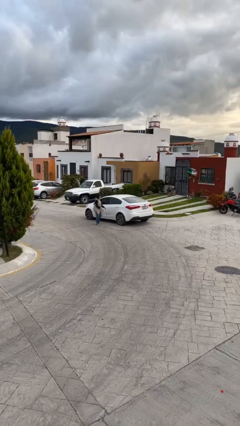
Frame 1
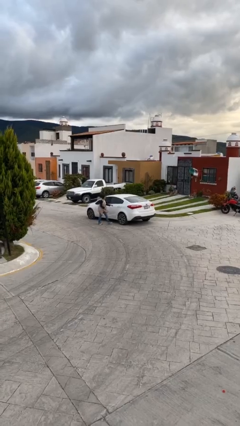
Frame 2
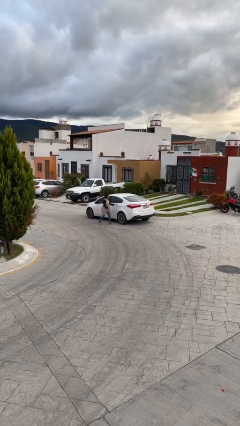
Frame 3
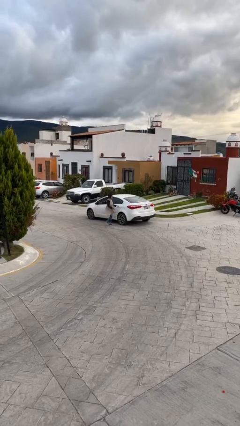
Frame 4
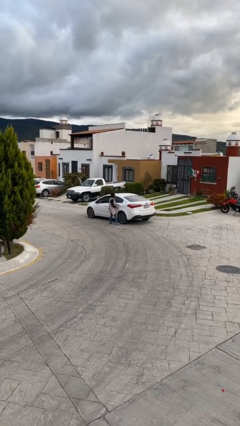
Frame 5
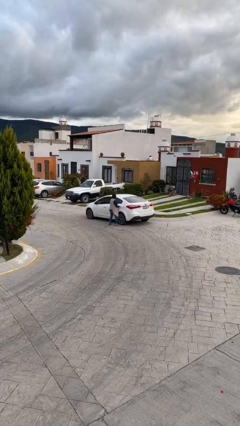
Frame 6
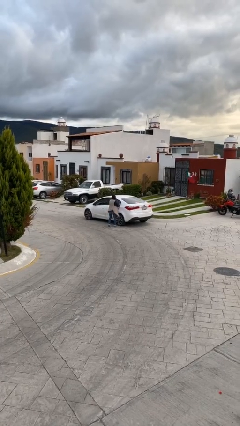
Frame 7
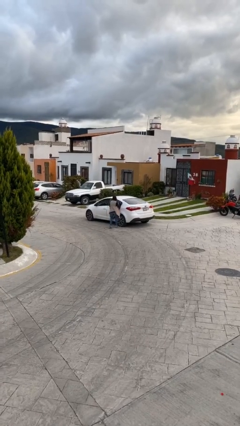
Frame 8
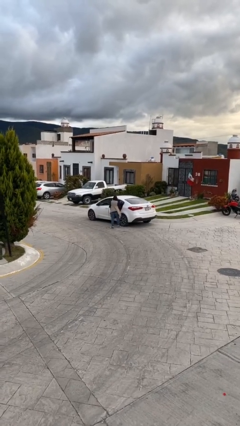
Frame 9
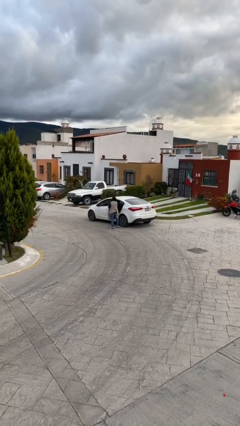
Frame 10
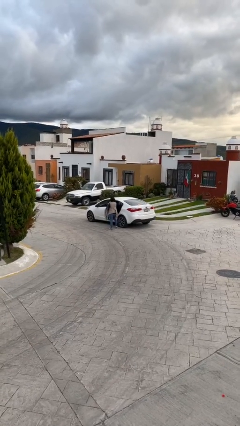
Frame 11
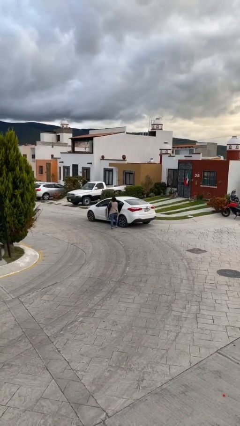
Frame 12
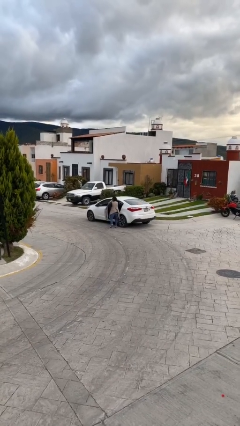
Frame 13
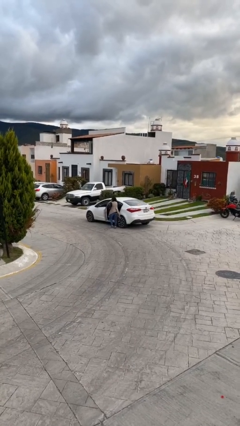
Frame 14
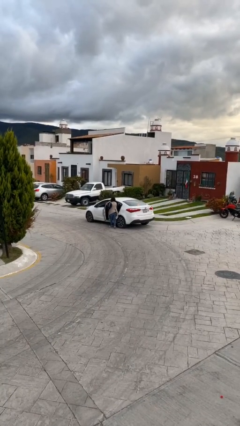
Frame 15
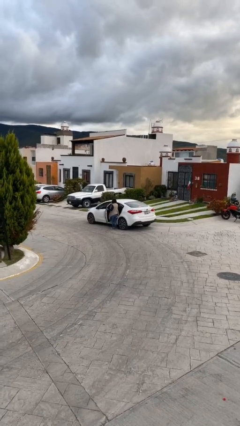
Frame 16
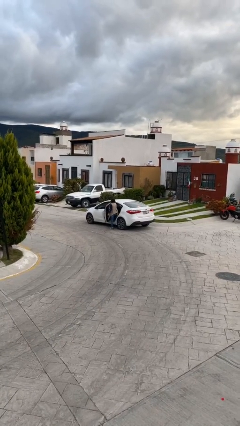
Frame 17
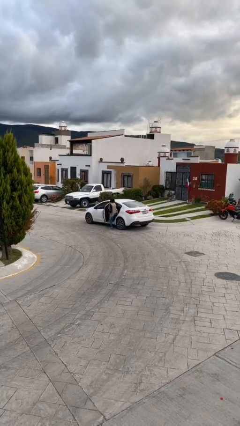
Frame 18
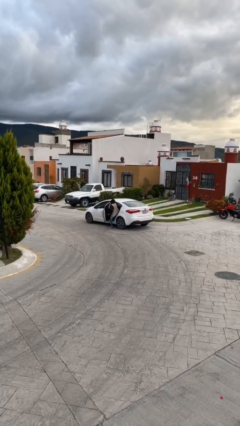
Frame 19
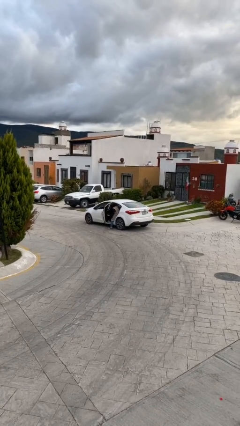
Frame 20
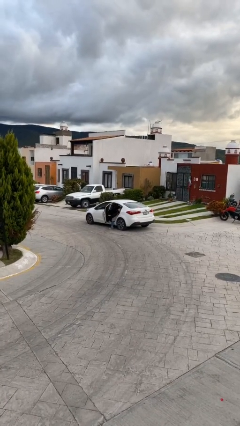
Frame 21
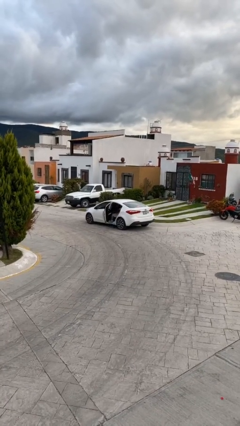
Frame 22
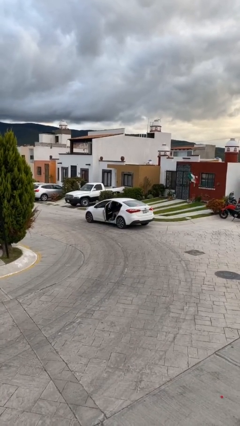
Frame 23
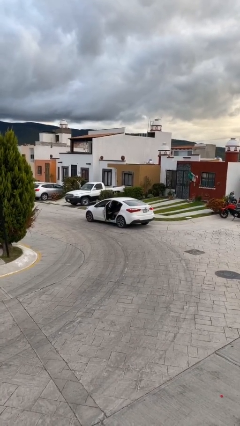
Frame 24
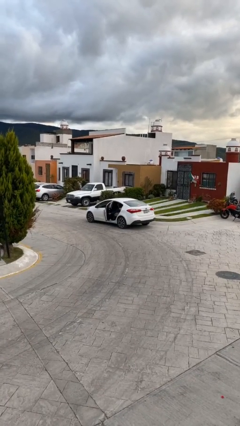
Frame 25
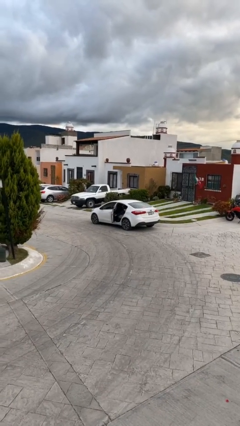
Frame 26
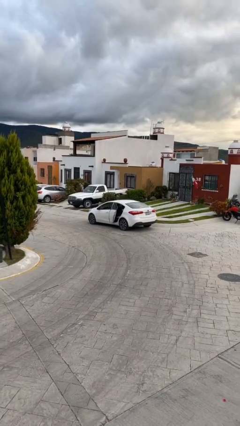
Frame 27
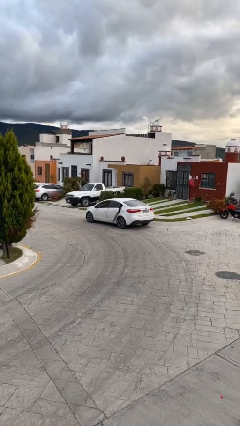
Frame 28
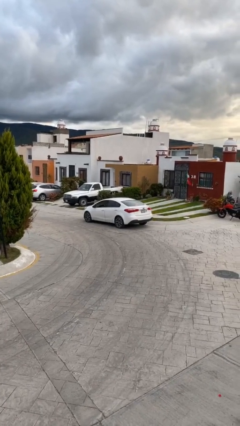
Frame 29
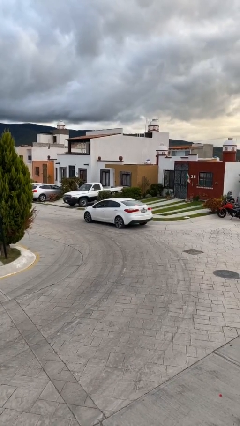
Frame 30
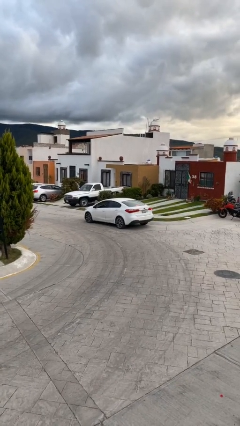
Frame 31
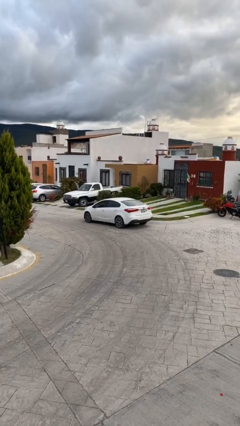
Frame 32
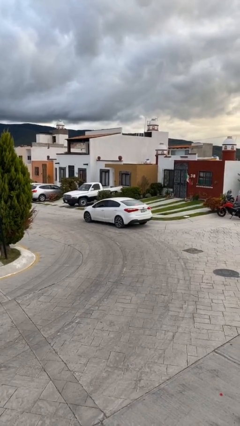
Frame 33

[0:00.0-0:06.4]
car picks up person

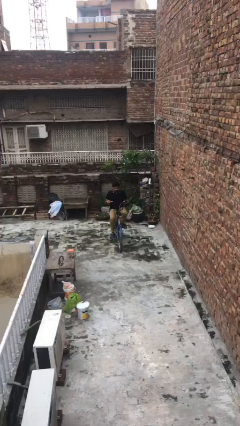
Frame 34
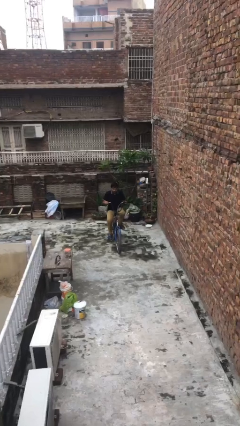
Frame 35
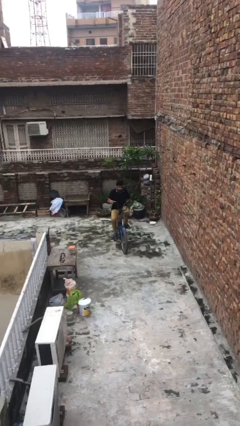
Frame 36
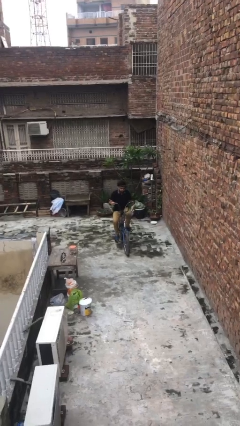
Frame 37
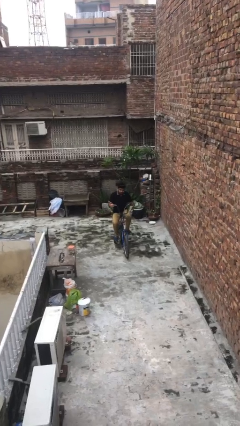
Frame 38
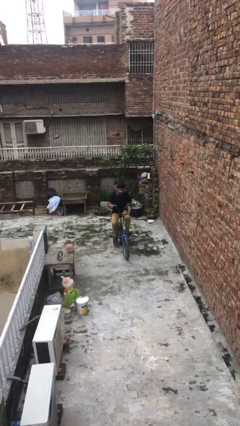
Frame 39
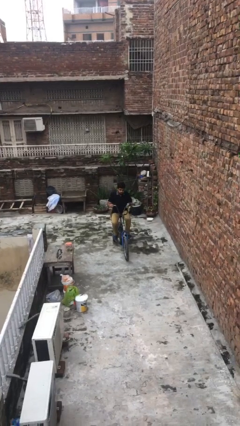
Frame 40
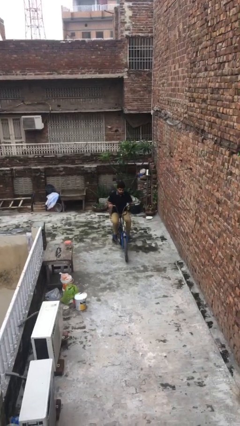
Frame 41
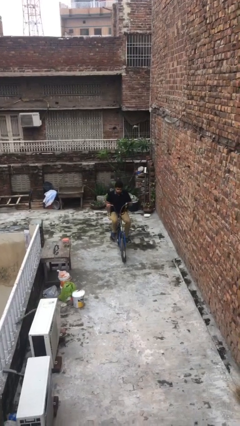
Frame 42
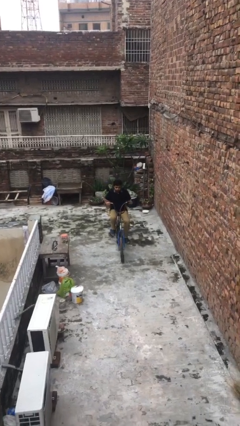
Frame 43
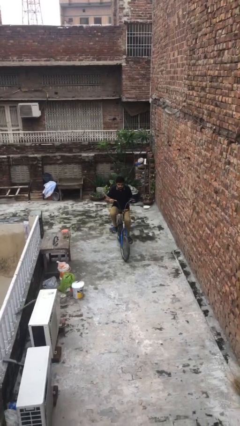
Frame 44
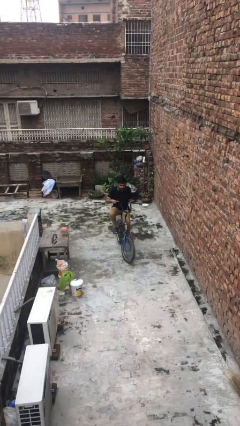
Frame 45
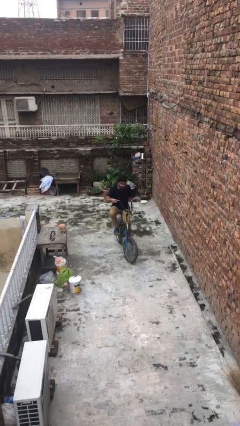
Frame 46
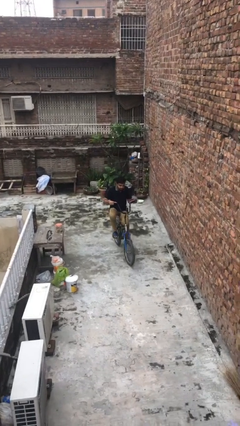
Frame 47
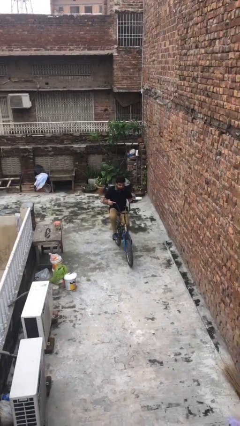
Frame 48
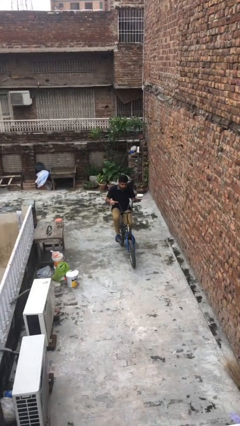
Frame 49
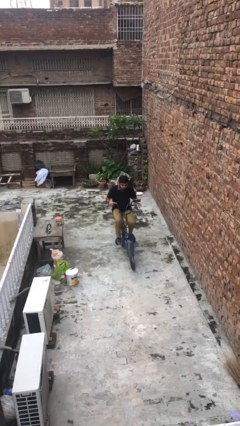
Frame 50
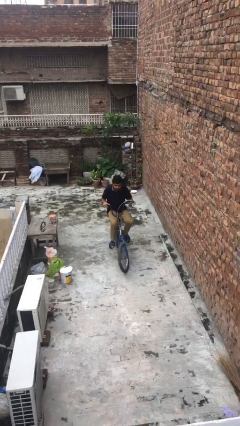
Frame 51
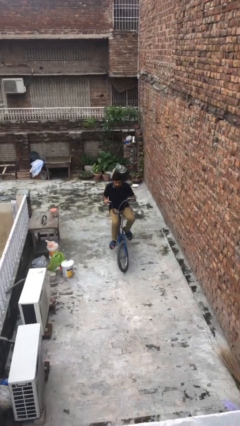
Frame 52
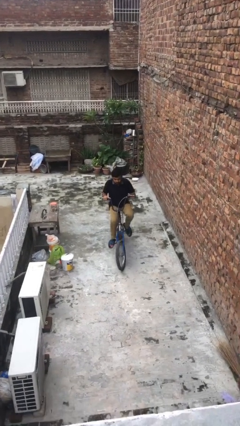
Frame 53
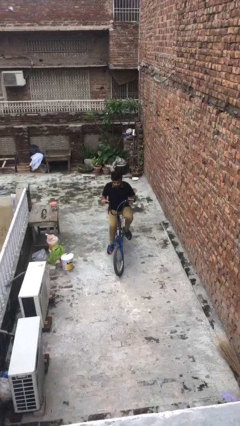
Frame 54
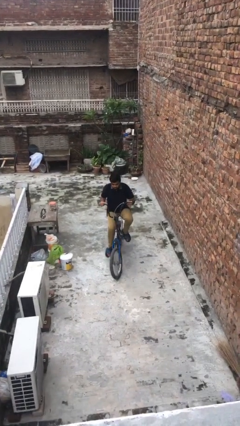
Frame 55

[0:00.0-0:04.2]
person rides bicycle

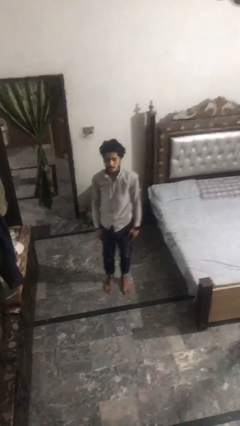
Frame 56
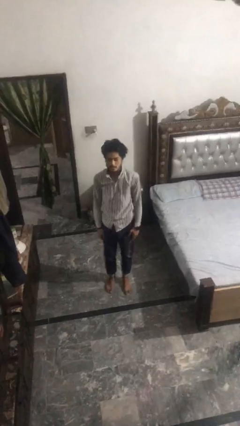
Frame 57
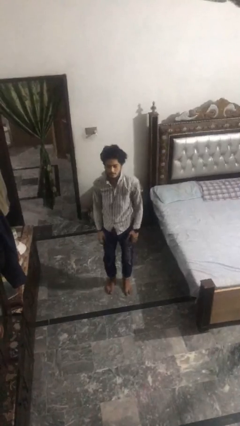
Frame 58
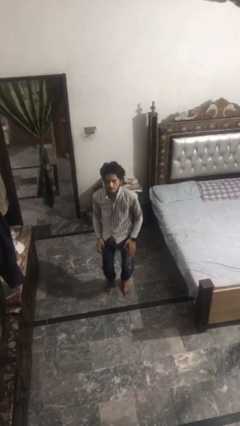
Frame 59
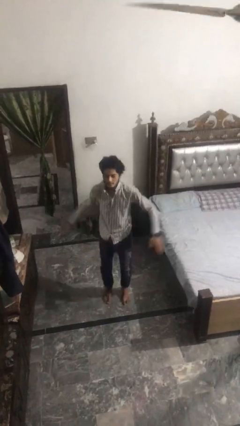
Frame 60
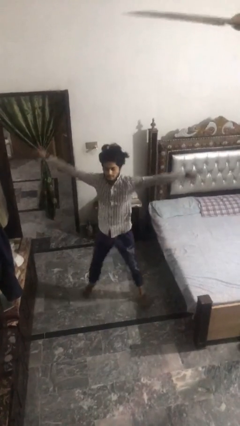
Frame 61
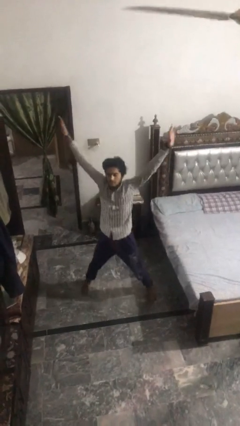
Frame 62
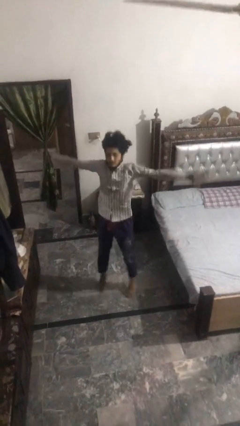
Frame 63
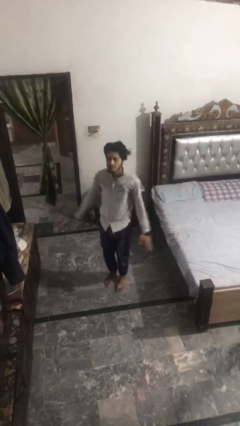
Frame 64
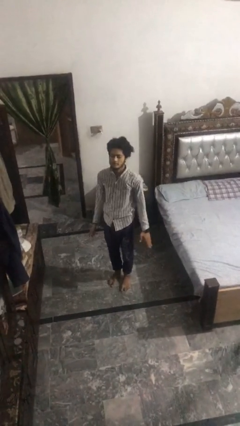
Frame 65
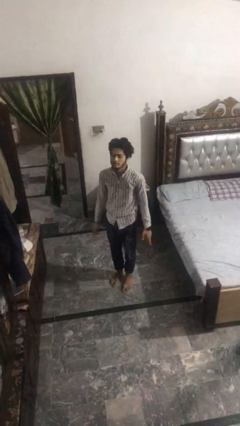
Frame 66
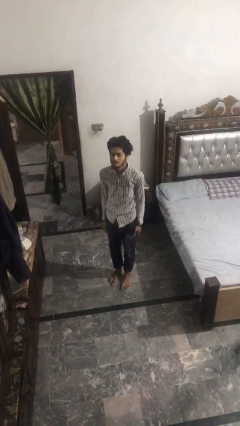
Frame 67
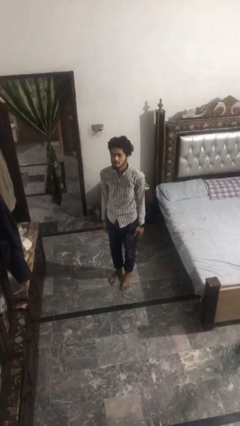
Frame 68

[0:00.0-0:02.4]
person exercises with jumping jacks

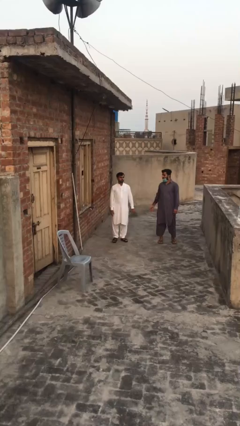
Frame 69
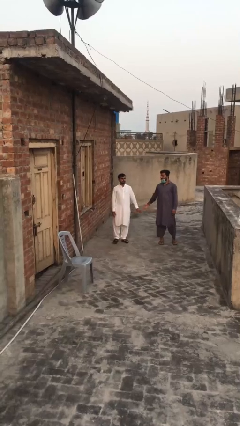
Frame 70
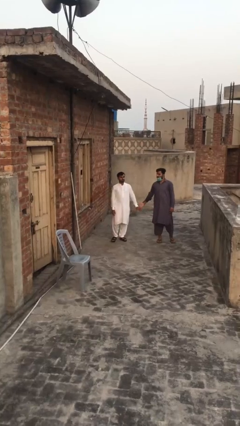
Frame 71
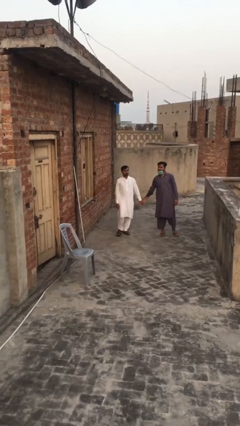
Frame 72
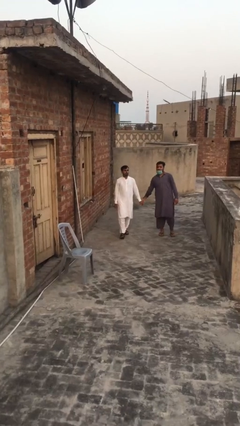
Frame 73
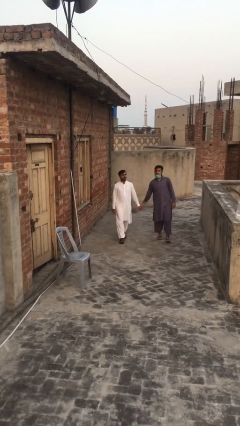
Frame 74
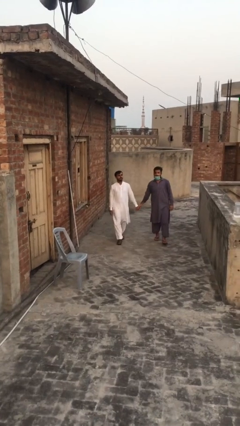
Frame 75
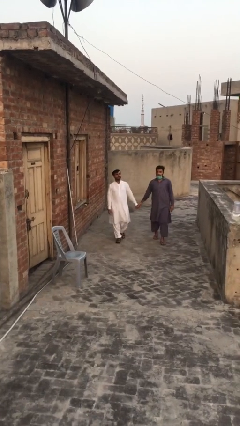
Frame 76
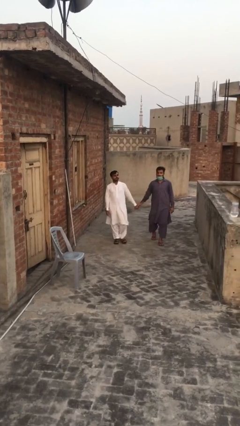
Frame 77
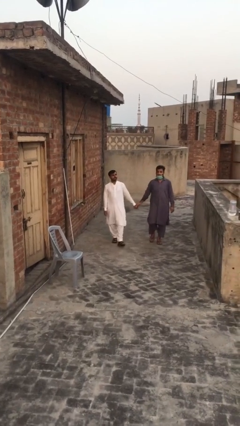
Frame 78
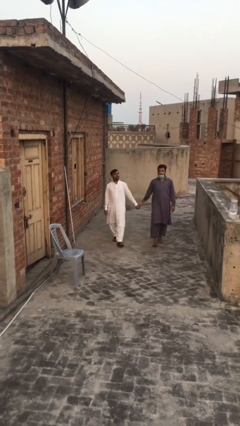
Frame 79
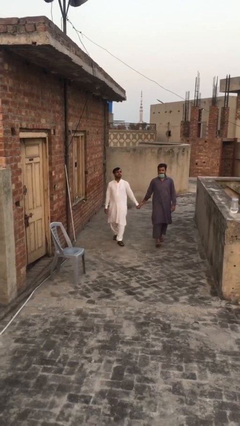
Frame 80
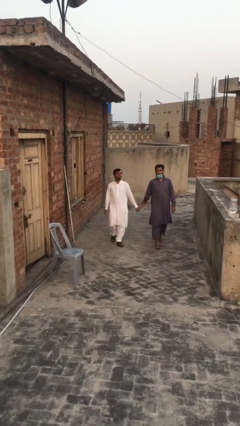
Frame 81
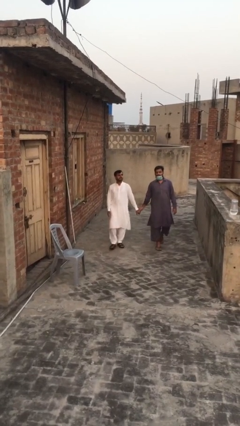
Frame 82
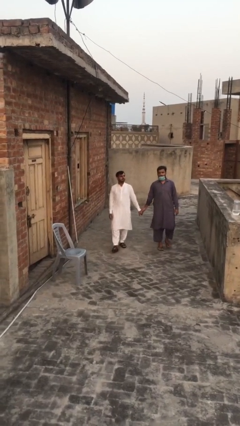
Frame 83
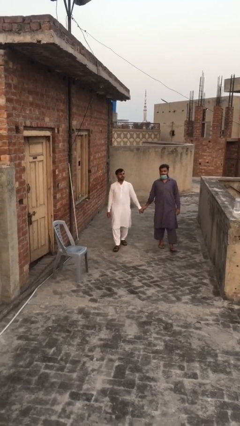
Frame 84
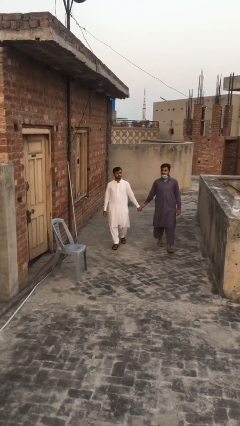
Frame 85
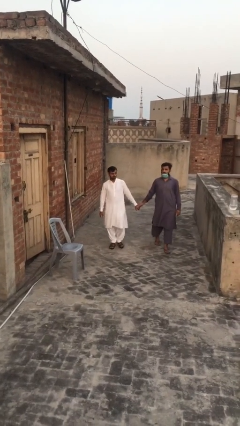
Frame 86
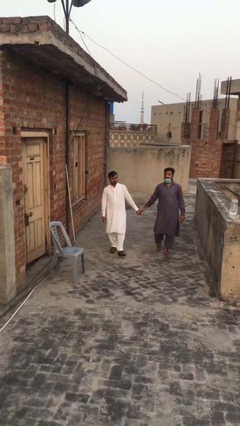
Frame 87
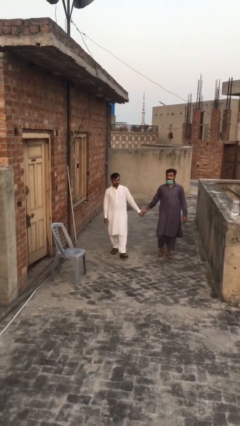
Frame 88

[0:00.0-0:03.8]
person holds hand

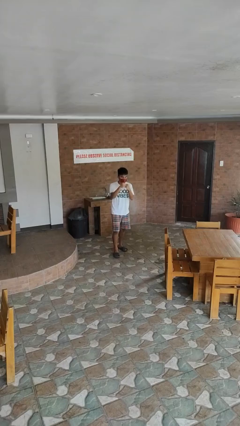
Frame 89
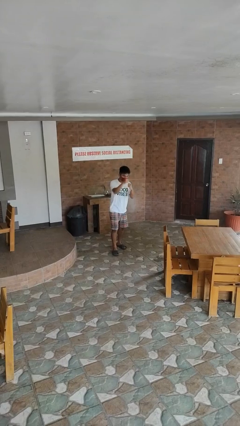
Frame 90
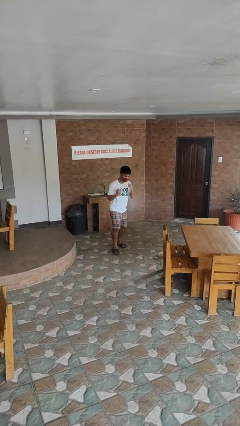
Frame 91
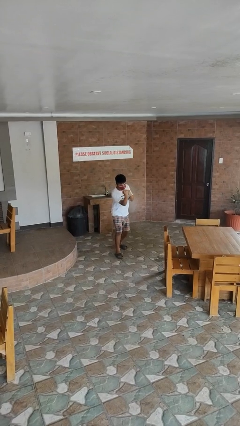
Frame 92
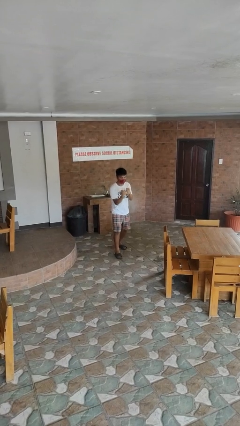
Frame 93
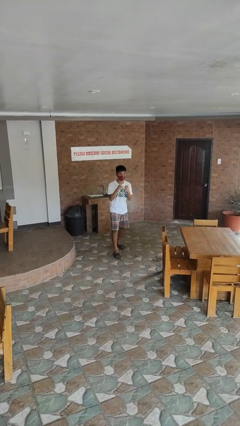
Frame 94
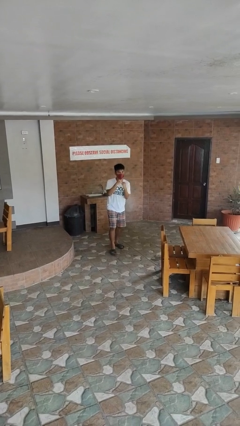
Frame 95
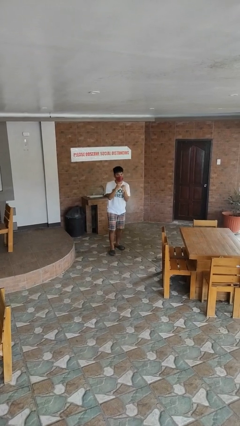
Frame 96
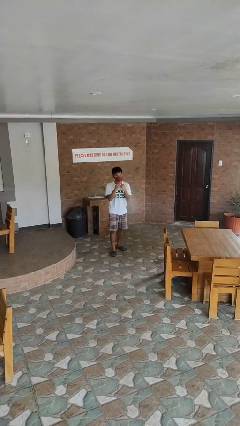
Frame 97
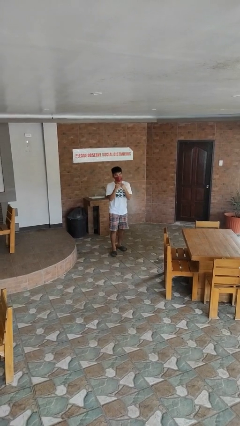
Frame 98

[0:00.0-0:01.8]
person punches
